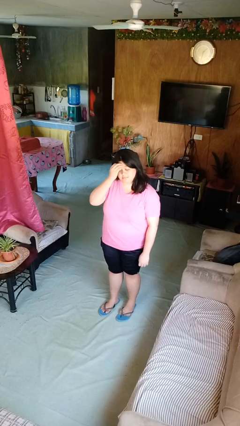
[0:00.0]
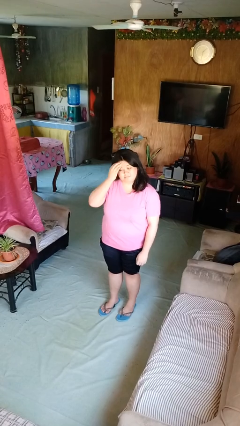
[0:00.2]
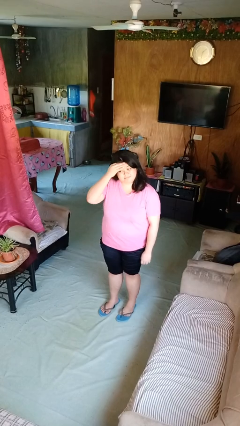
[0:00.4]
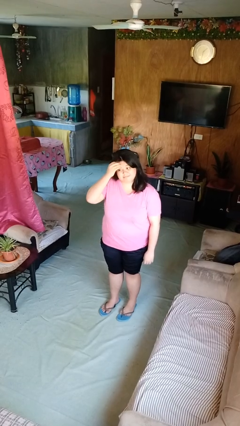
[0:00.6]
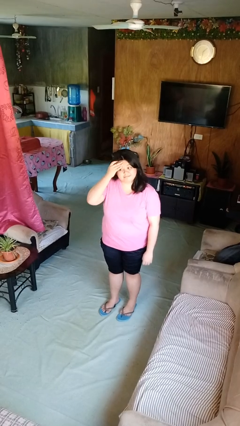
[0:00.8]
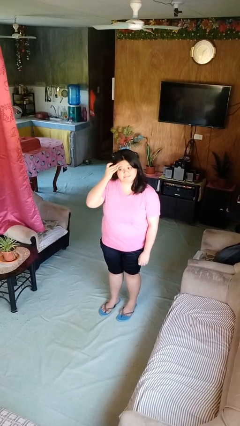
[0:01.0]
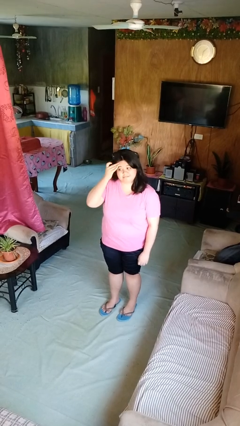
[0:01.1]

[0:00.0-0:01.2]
person scratches face

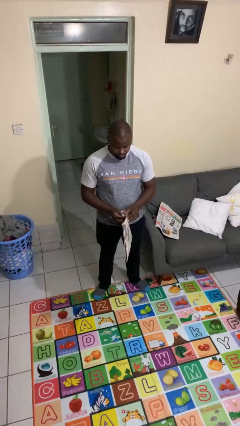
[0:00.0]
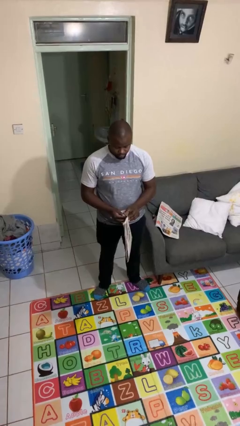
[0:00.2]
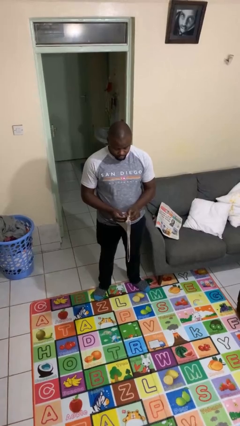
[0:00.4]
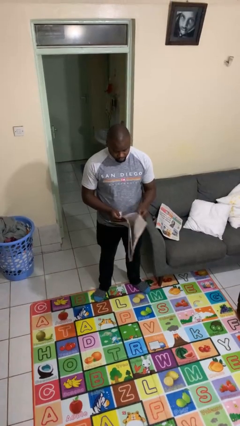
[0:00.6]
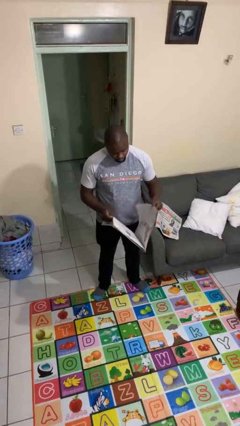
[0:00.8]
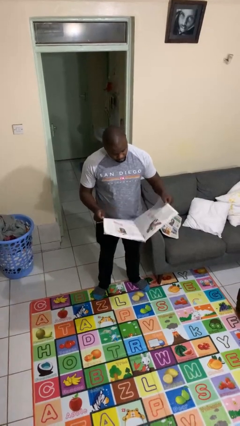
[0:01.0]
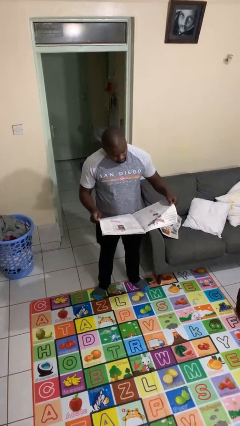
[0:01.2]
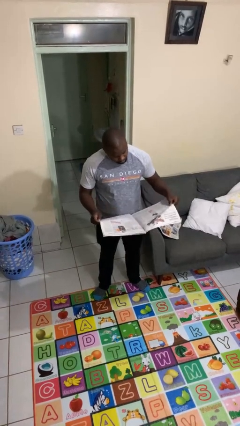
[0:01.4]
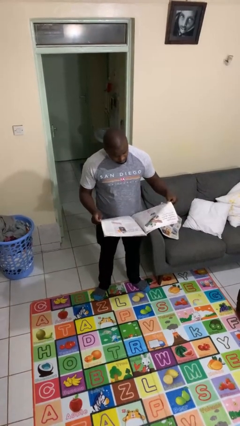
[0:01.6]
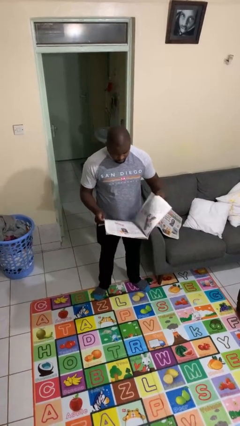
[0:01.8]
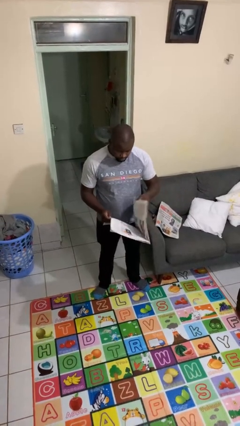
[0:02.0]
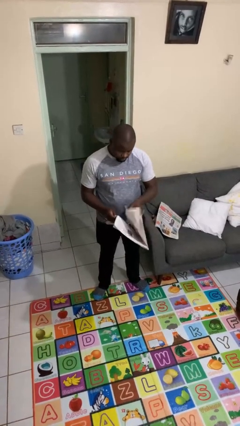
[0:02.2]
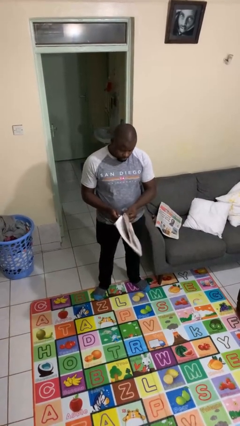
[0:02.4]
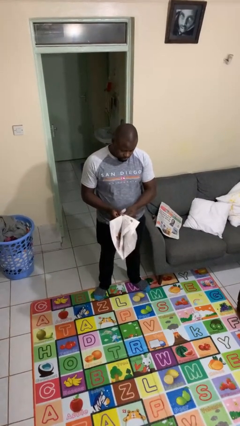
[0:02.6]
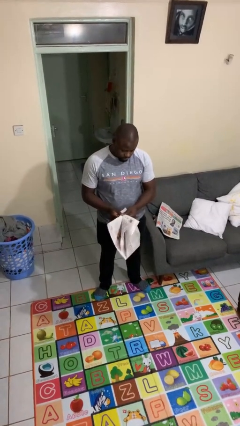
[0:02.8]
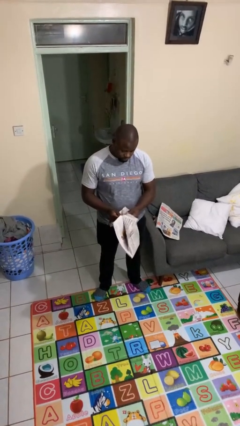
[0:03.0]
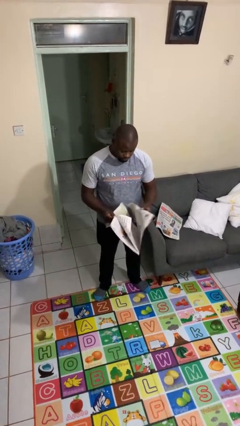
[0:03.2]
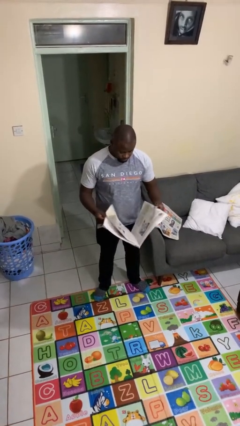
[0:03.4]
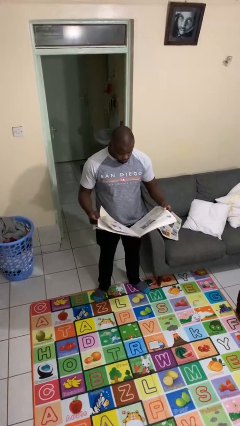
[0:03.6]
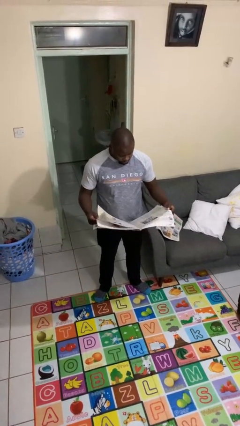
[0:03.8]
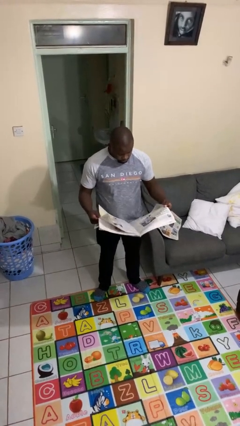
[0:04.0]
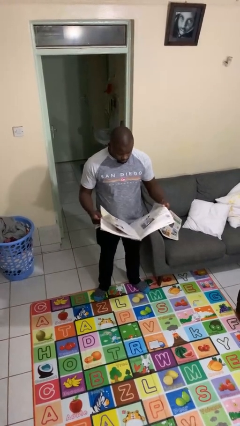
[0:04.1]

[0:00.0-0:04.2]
person reads newspaper

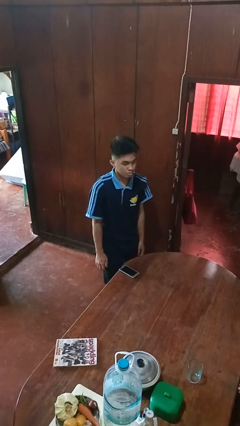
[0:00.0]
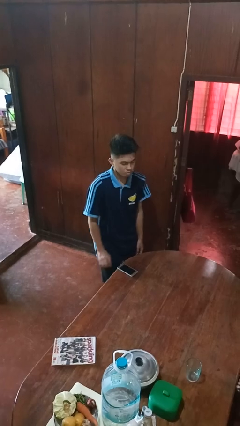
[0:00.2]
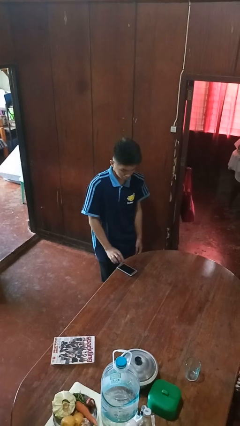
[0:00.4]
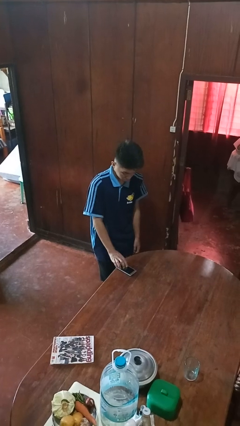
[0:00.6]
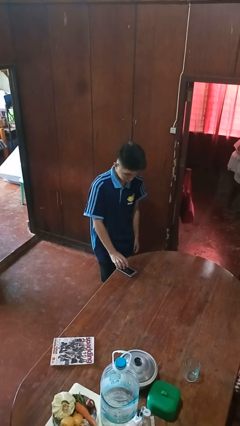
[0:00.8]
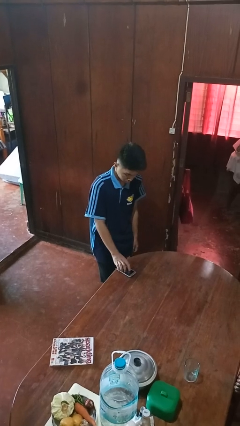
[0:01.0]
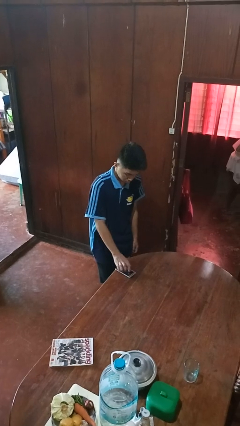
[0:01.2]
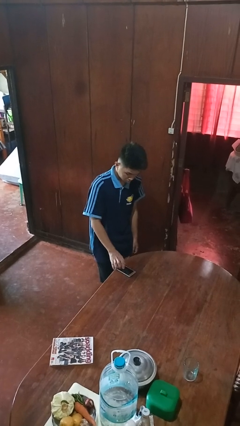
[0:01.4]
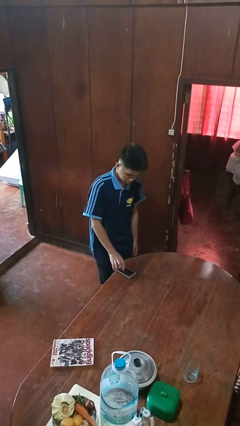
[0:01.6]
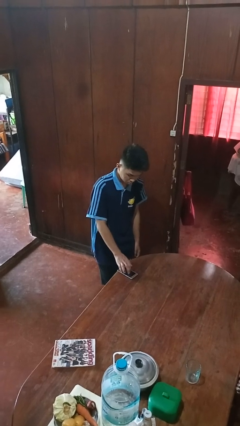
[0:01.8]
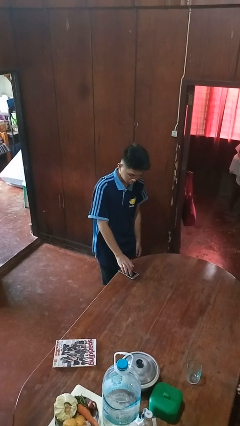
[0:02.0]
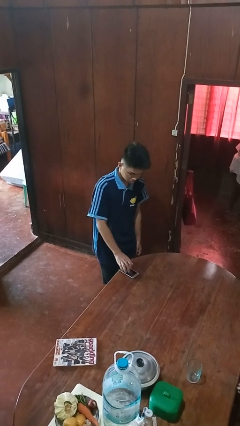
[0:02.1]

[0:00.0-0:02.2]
person taps object with finger

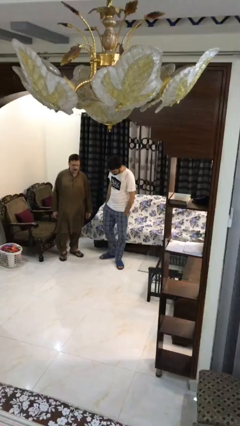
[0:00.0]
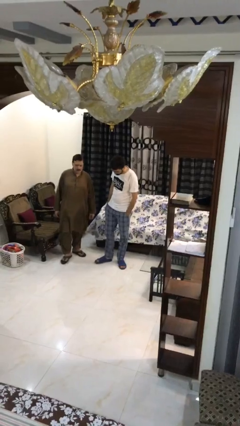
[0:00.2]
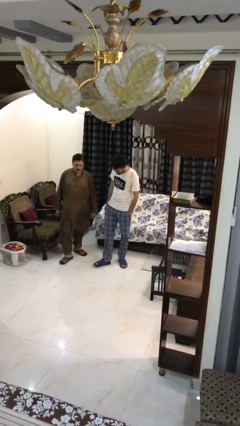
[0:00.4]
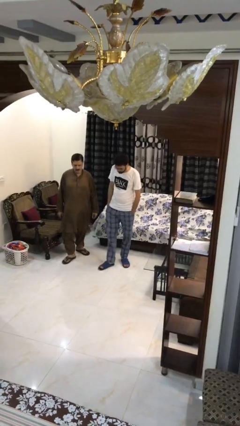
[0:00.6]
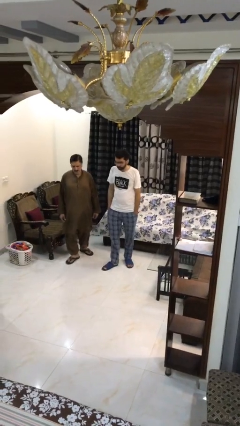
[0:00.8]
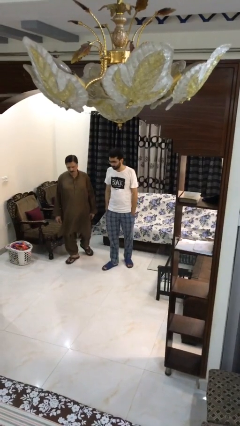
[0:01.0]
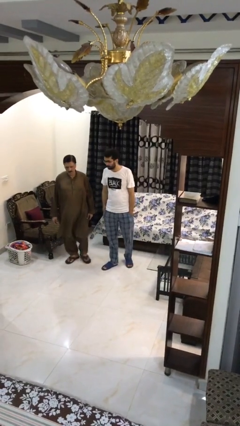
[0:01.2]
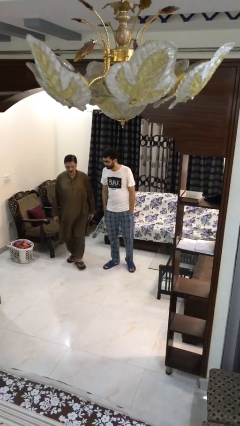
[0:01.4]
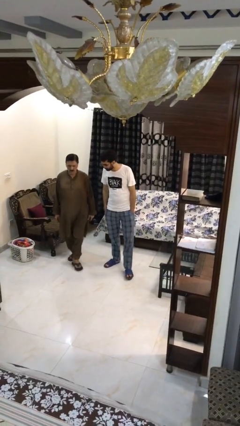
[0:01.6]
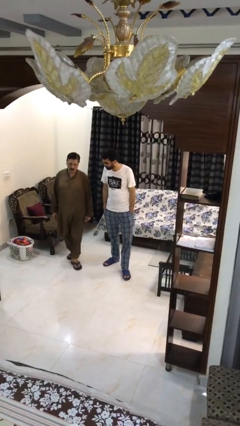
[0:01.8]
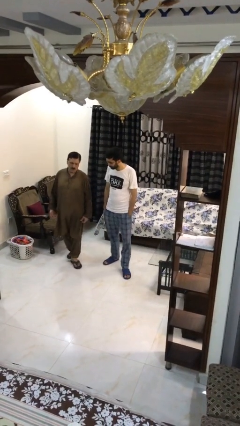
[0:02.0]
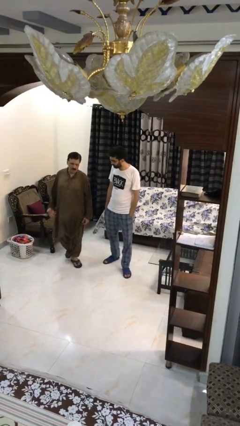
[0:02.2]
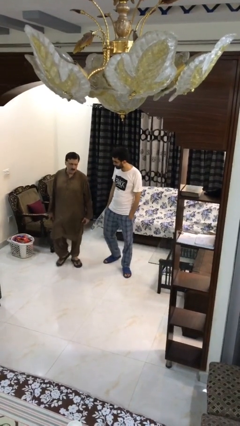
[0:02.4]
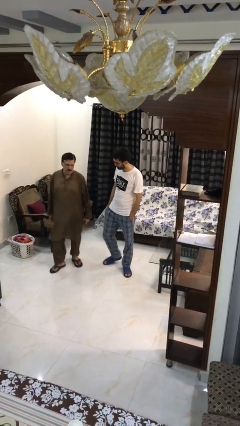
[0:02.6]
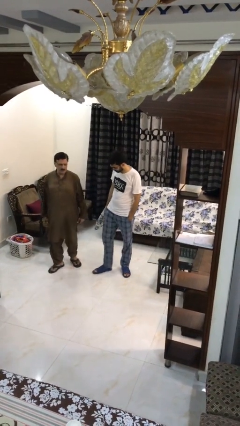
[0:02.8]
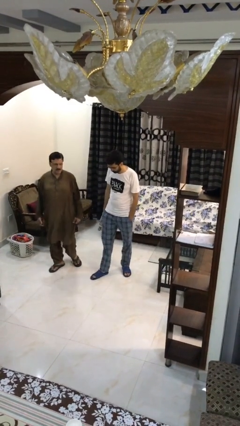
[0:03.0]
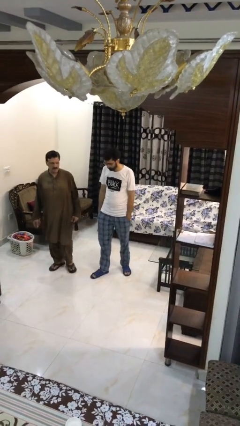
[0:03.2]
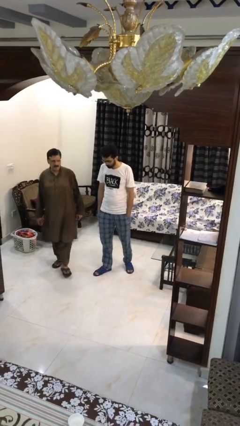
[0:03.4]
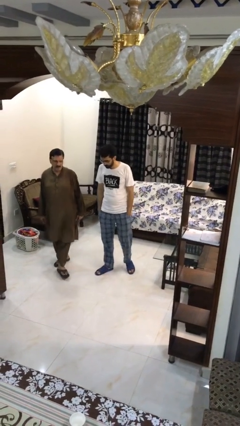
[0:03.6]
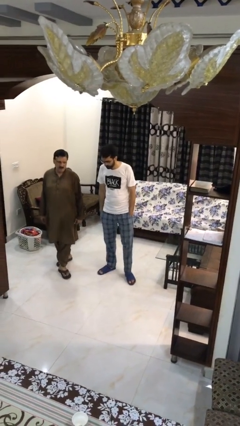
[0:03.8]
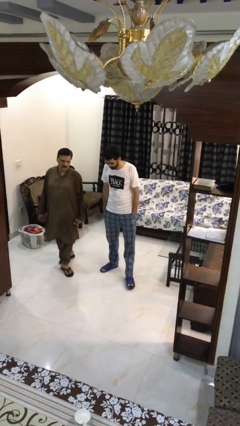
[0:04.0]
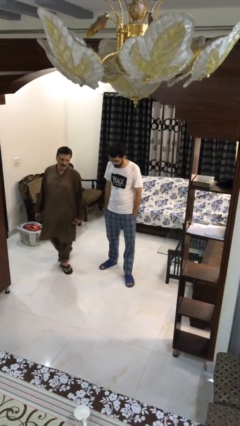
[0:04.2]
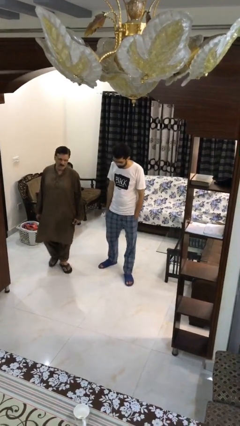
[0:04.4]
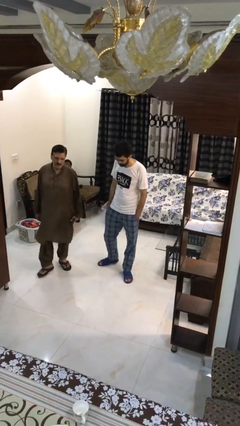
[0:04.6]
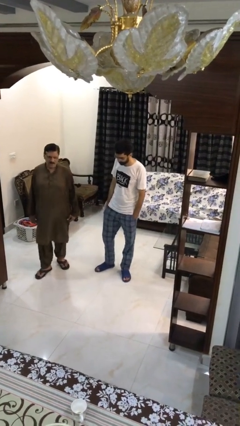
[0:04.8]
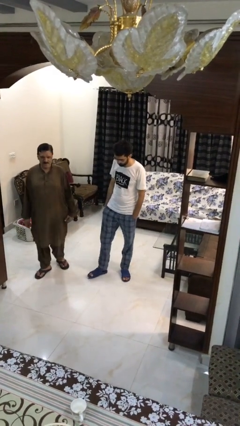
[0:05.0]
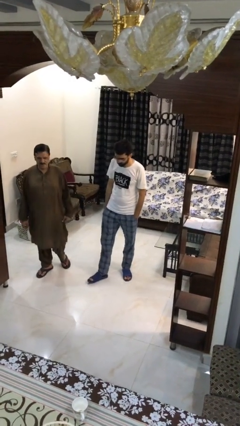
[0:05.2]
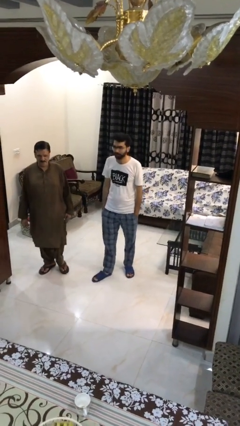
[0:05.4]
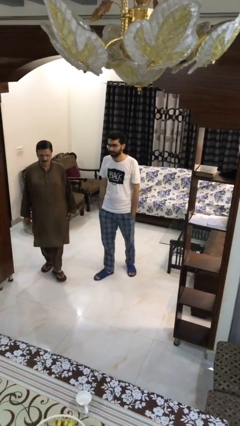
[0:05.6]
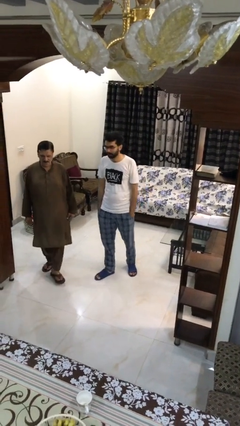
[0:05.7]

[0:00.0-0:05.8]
person talks to person

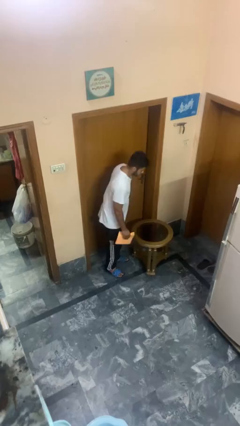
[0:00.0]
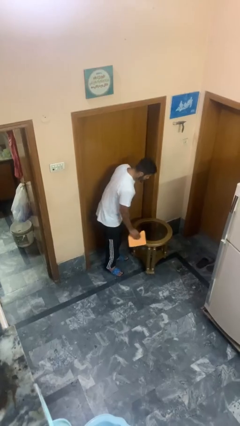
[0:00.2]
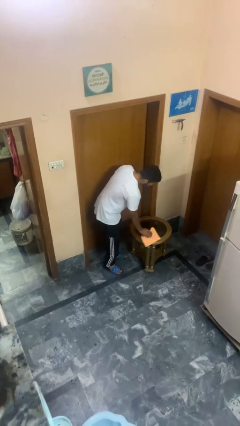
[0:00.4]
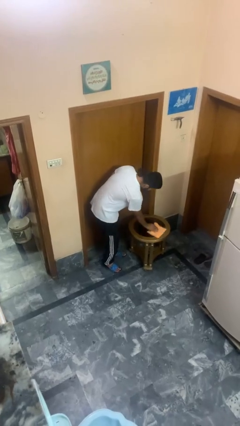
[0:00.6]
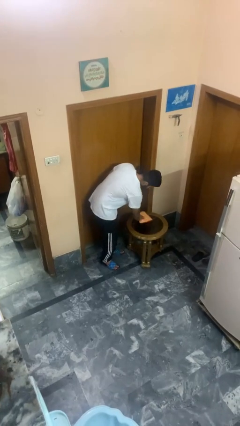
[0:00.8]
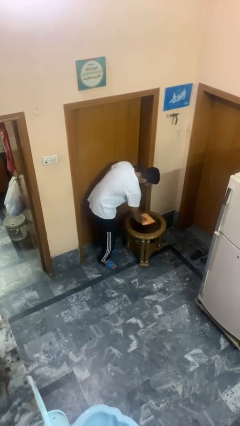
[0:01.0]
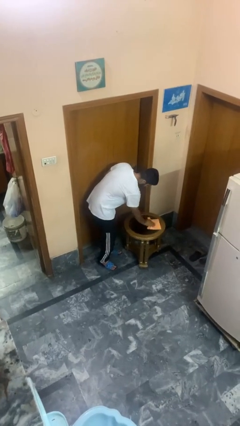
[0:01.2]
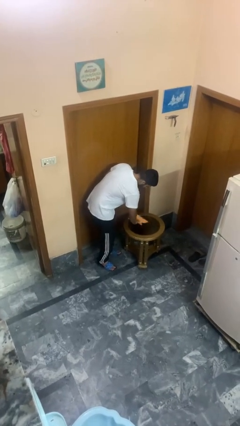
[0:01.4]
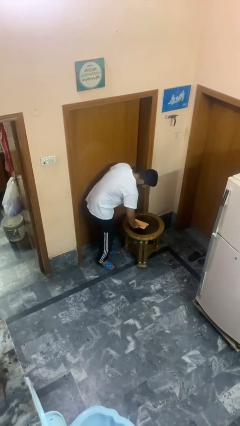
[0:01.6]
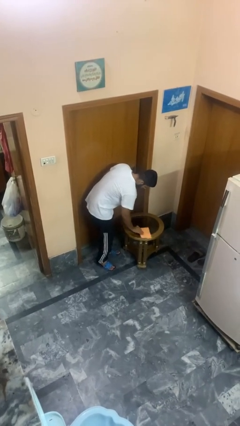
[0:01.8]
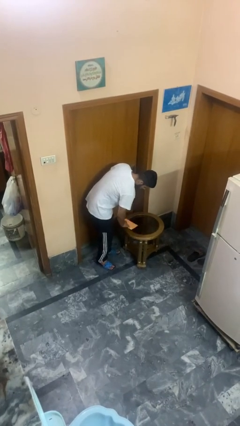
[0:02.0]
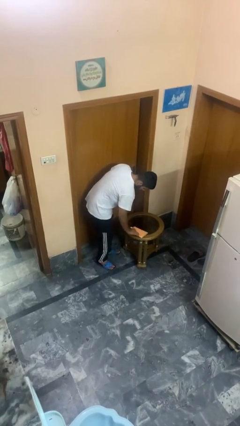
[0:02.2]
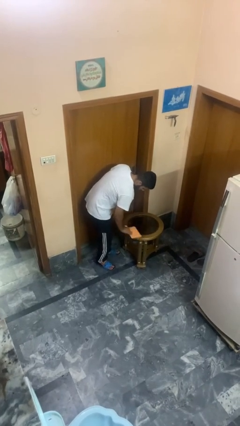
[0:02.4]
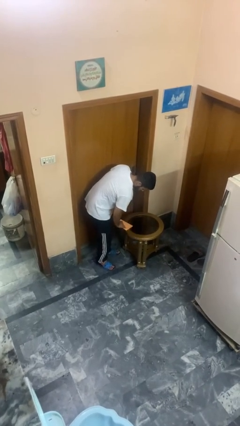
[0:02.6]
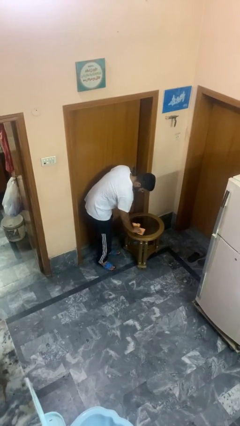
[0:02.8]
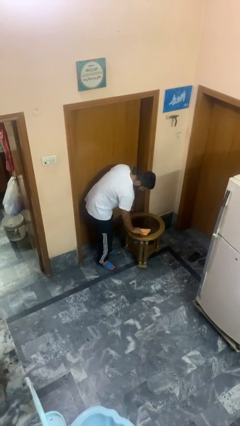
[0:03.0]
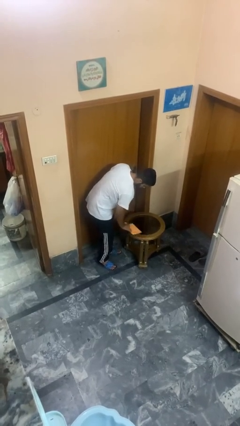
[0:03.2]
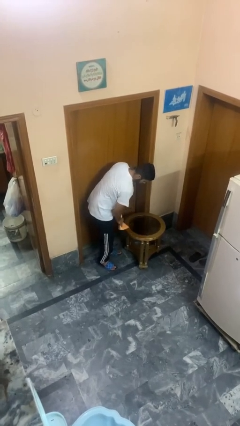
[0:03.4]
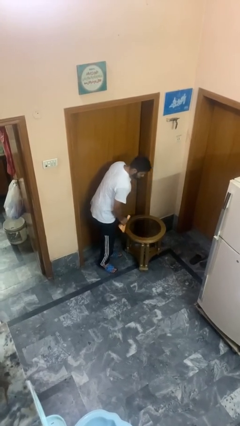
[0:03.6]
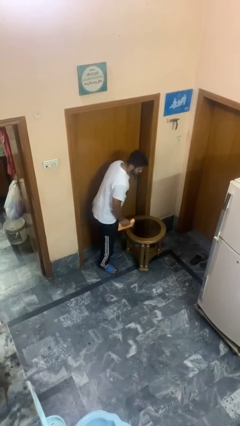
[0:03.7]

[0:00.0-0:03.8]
person cleans table with rag
